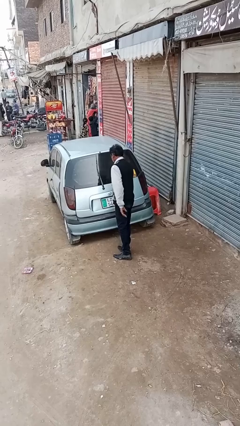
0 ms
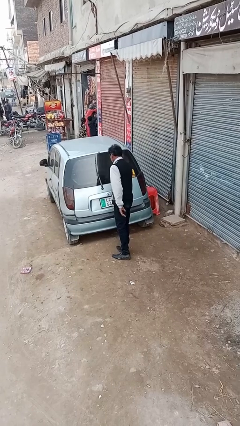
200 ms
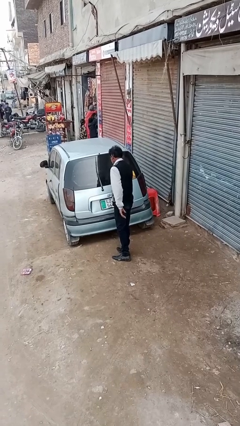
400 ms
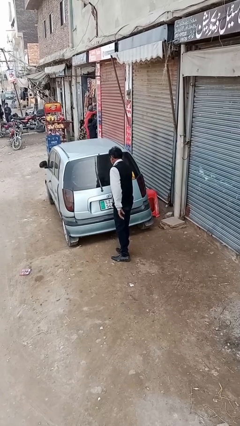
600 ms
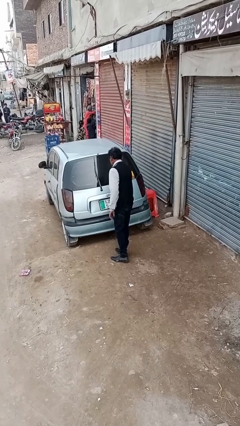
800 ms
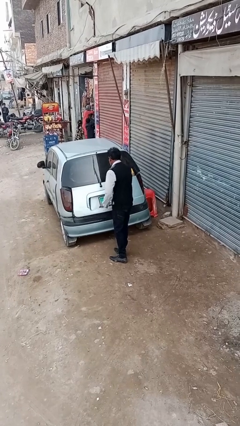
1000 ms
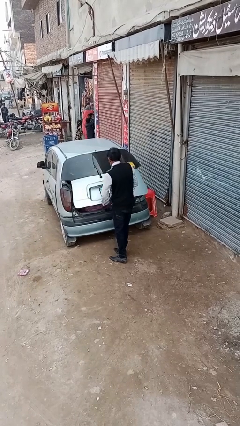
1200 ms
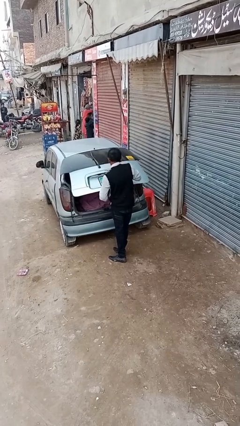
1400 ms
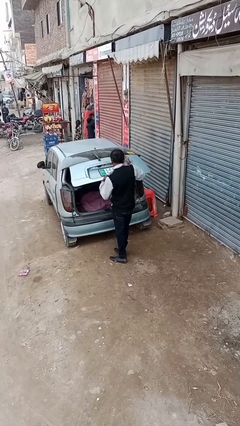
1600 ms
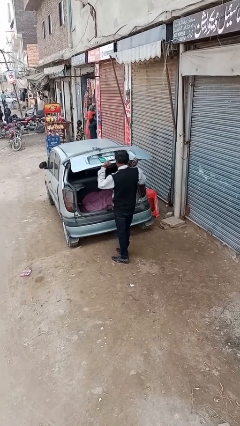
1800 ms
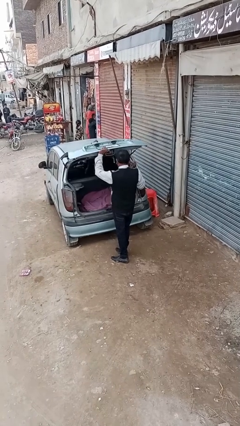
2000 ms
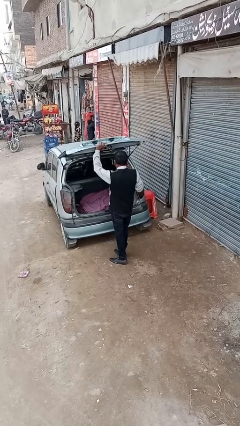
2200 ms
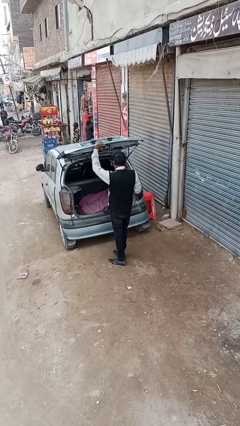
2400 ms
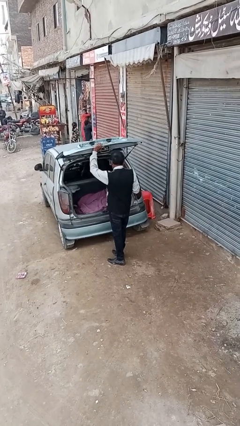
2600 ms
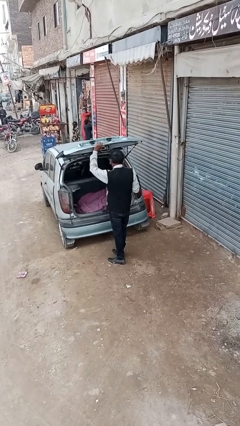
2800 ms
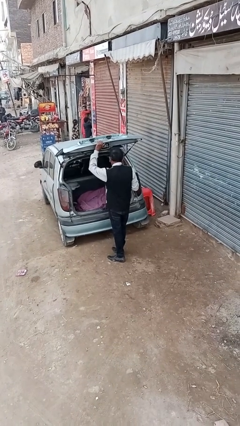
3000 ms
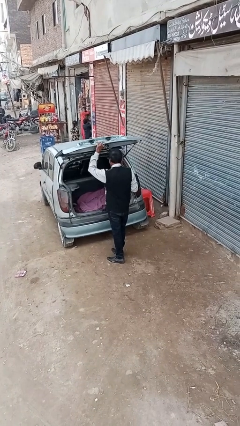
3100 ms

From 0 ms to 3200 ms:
person opens car trunk

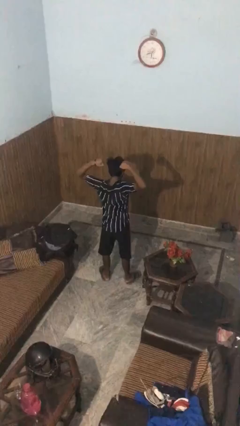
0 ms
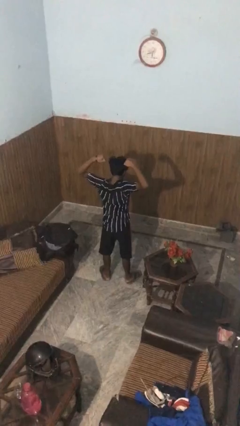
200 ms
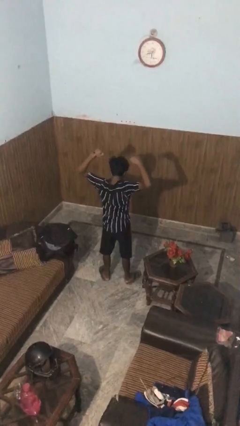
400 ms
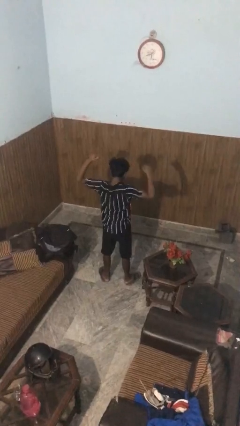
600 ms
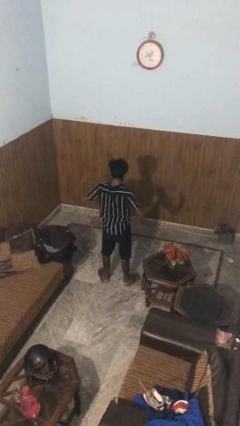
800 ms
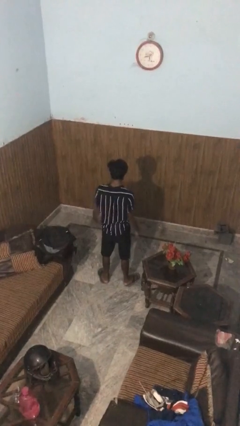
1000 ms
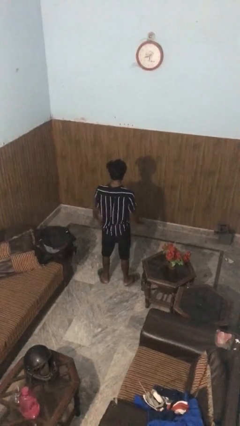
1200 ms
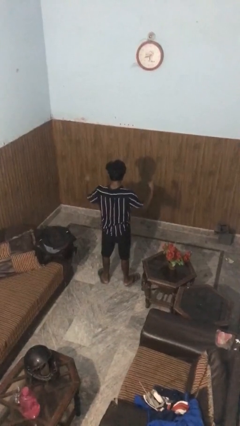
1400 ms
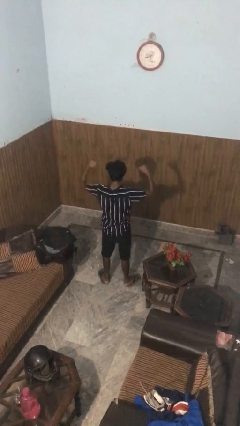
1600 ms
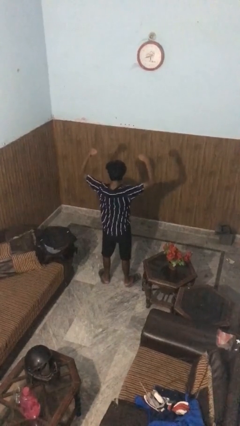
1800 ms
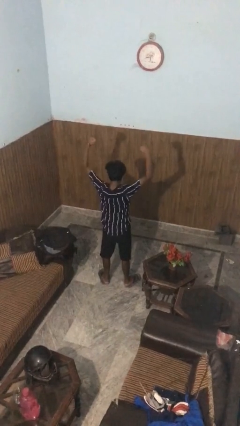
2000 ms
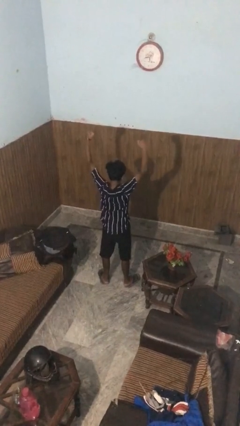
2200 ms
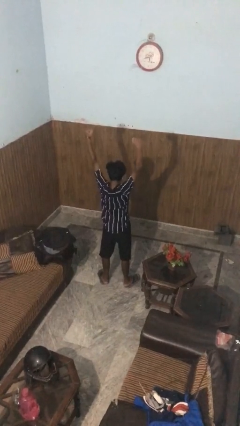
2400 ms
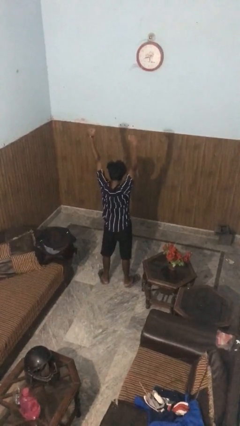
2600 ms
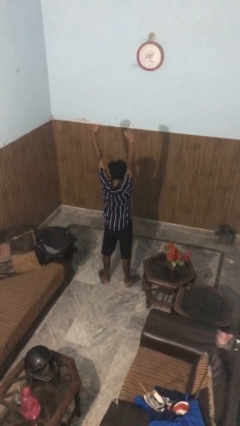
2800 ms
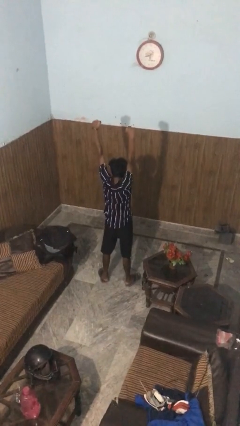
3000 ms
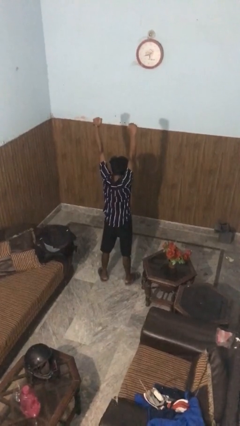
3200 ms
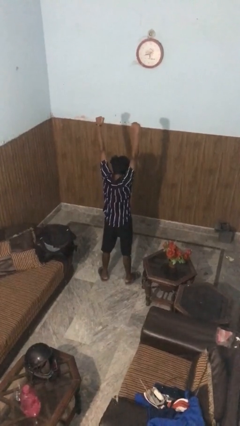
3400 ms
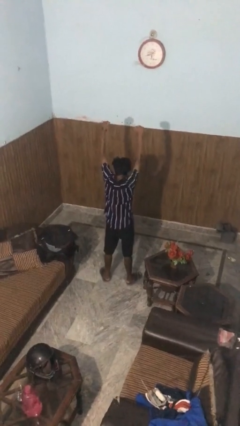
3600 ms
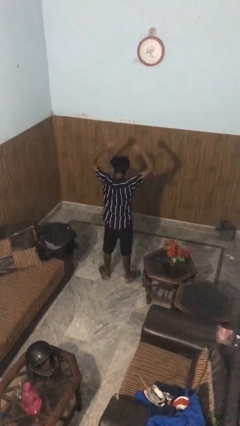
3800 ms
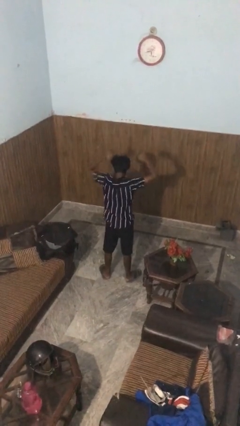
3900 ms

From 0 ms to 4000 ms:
person stretches arms over head

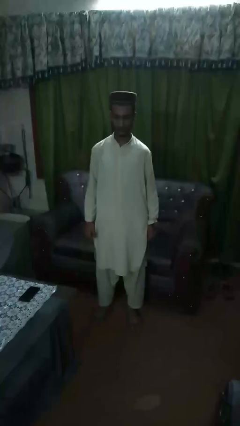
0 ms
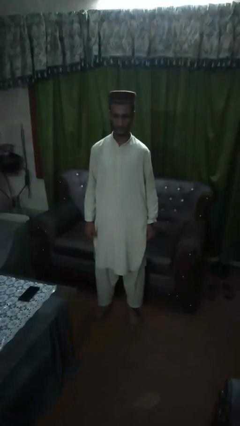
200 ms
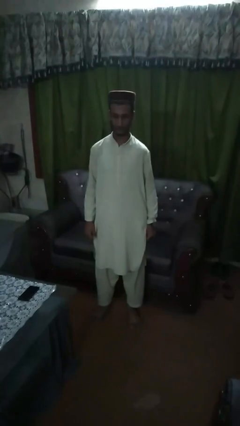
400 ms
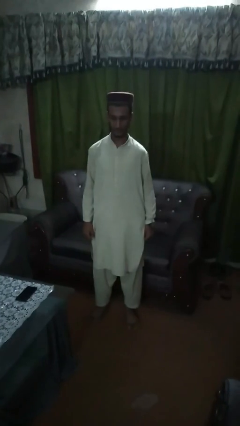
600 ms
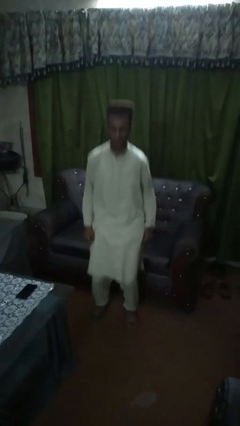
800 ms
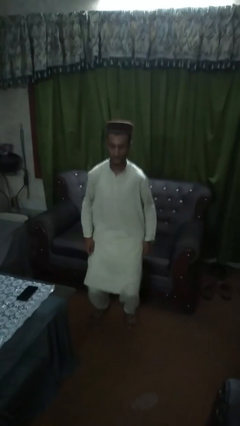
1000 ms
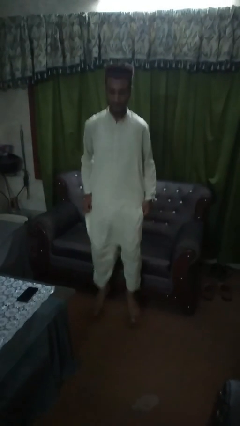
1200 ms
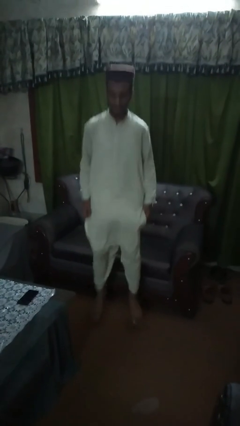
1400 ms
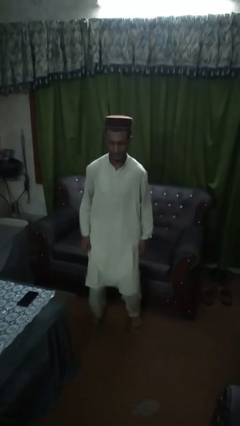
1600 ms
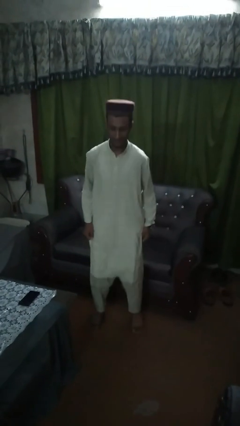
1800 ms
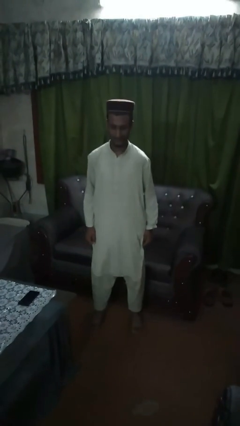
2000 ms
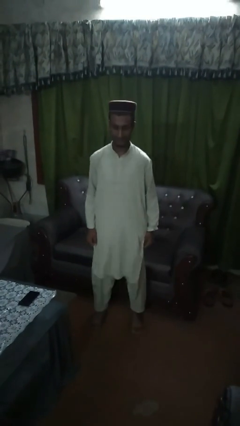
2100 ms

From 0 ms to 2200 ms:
person jumps

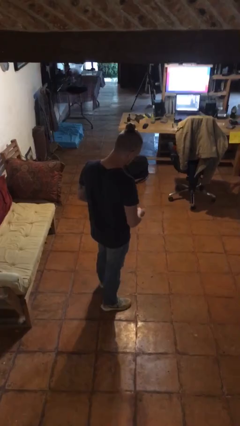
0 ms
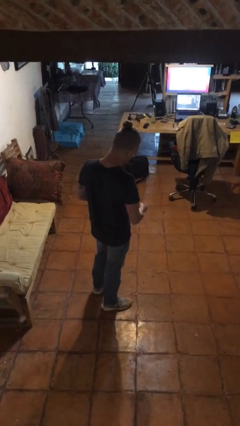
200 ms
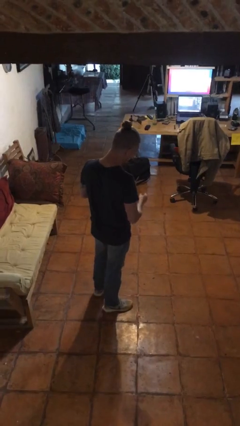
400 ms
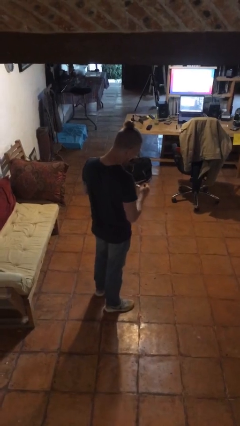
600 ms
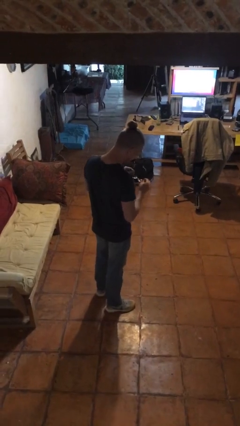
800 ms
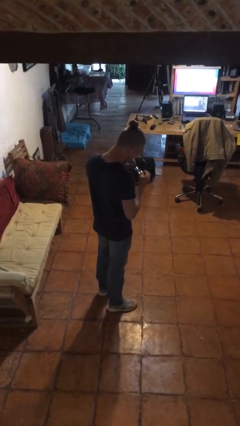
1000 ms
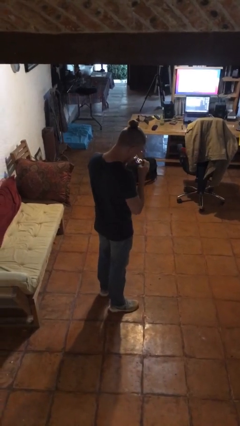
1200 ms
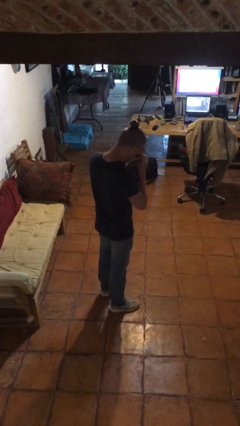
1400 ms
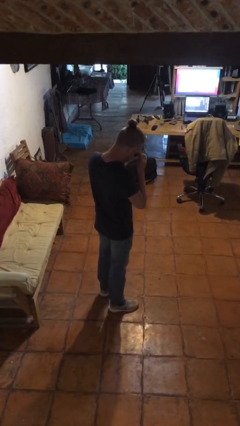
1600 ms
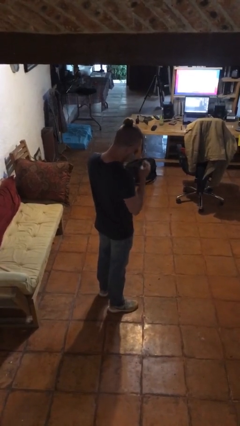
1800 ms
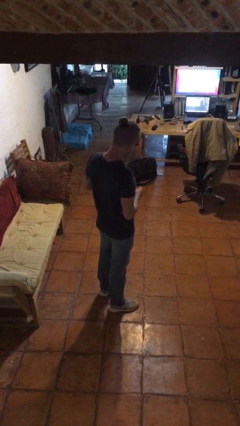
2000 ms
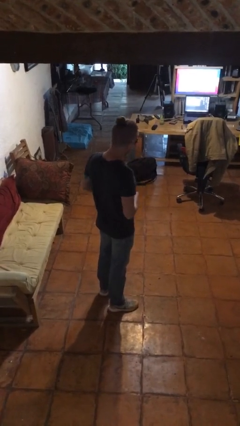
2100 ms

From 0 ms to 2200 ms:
person puts on sunglasses

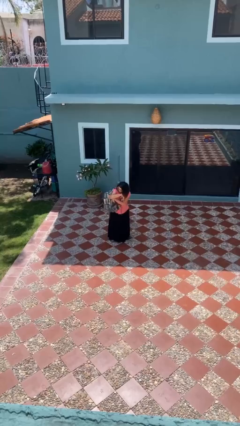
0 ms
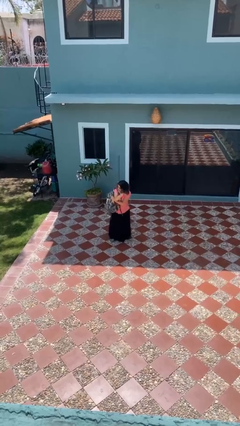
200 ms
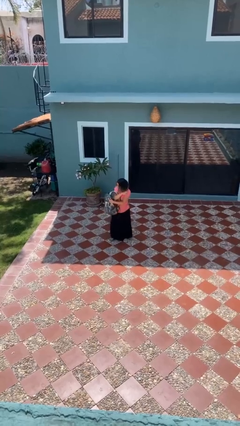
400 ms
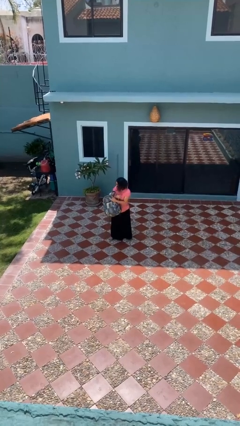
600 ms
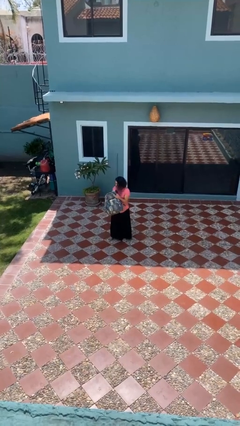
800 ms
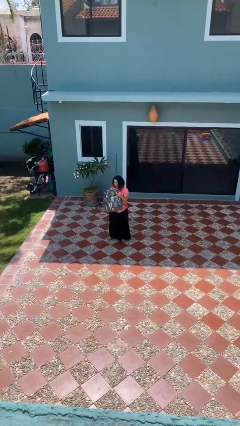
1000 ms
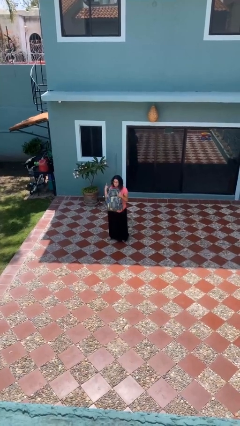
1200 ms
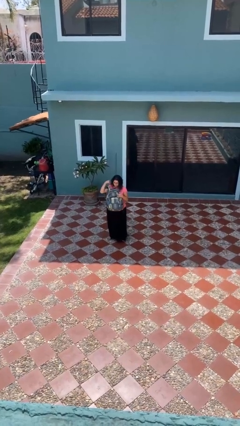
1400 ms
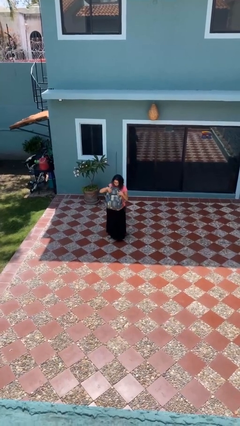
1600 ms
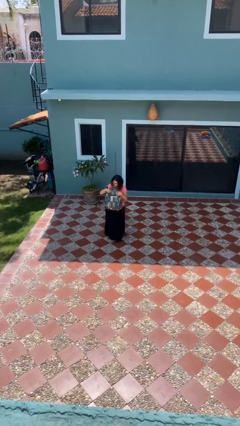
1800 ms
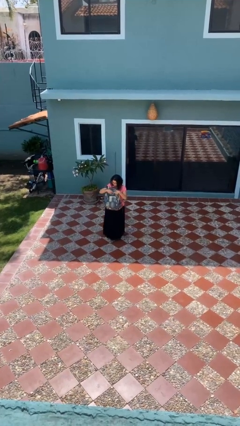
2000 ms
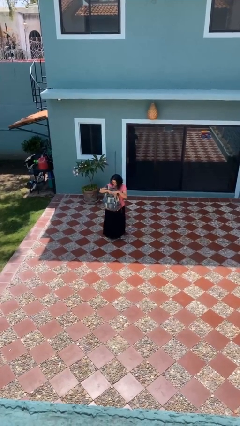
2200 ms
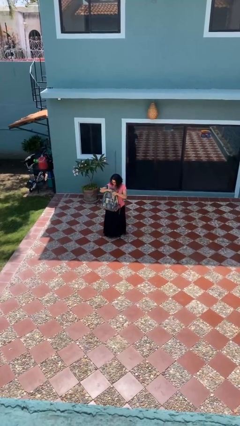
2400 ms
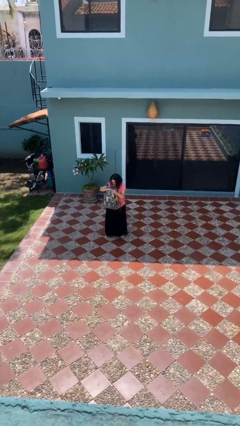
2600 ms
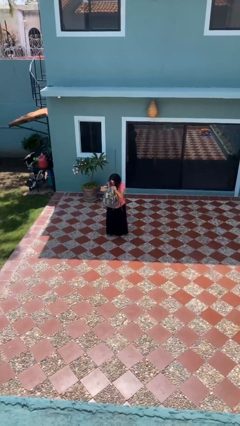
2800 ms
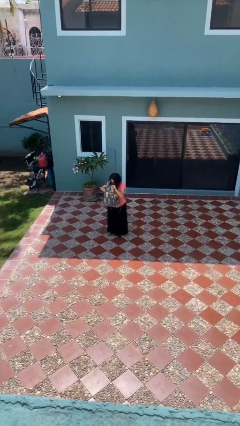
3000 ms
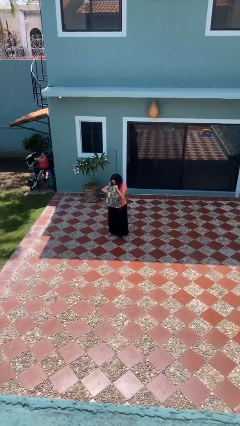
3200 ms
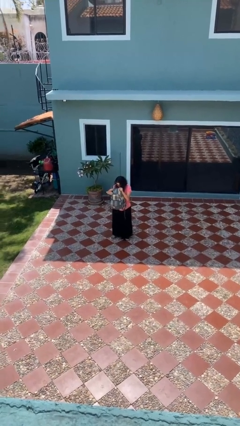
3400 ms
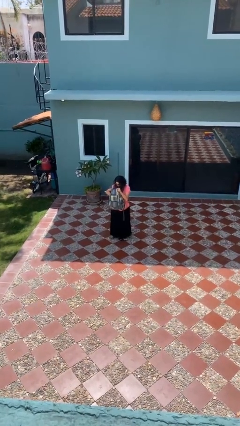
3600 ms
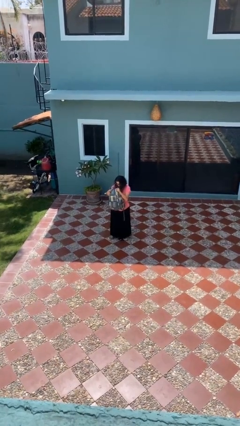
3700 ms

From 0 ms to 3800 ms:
person searches in backpack

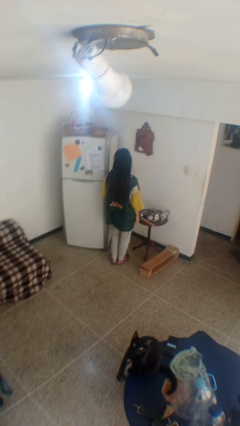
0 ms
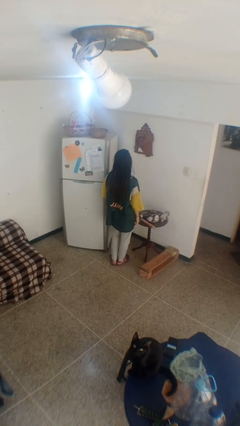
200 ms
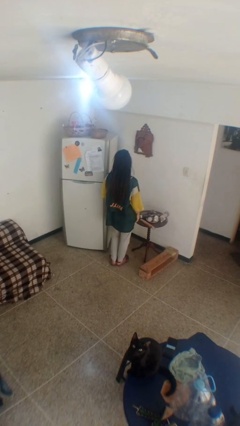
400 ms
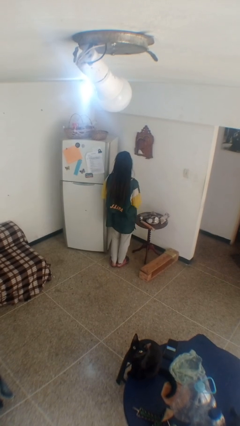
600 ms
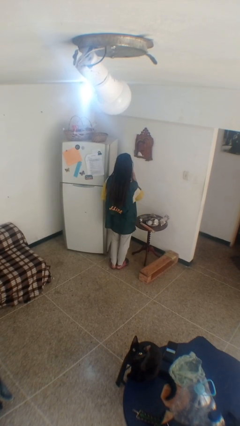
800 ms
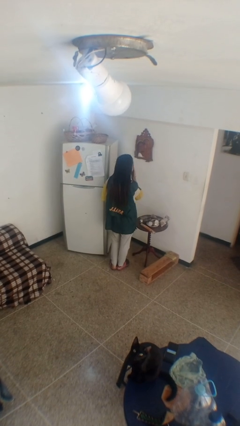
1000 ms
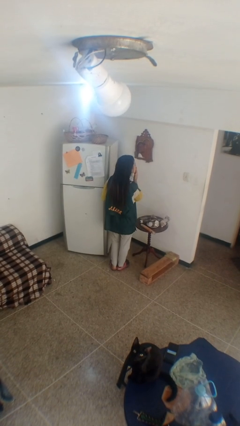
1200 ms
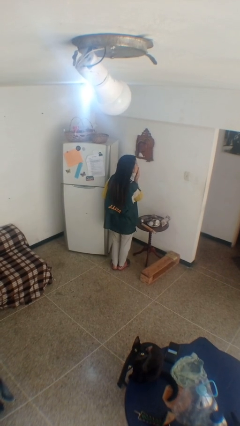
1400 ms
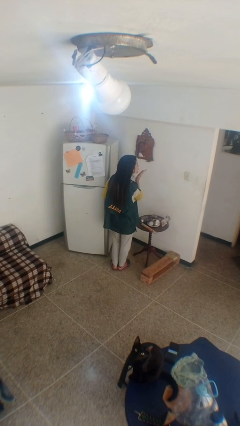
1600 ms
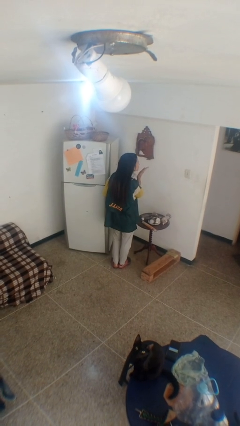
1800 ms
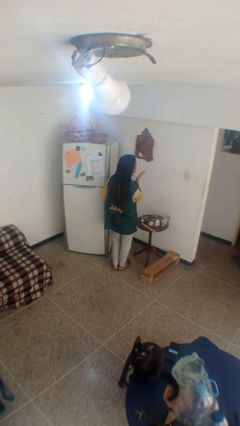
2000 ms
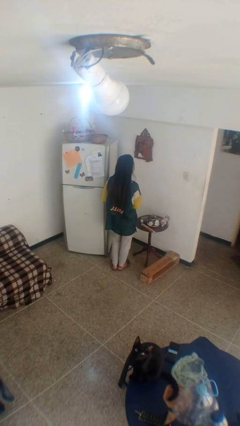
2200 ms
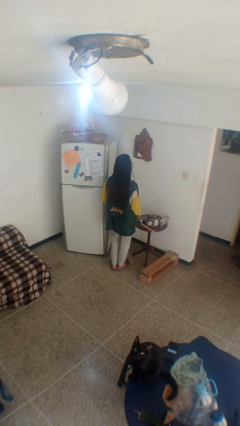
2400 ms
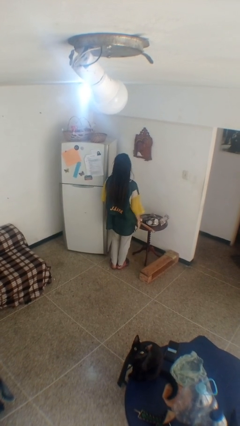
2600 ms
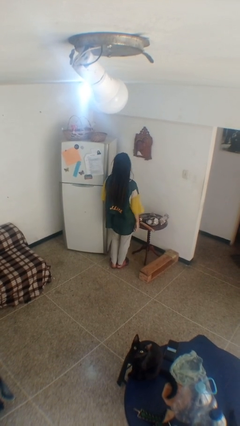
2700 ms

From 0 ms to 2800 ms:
person gestures blow kiss
